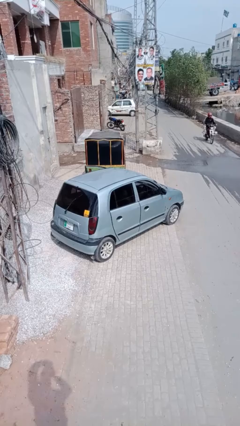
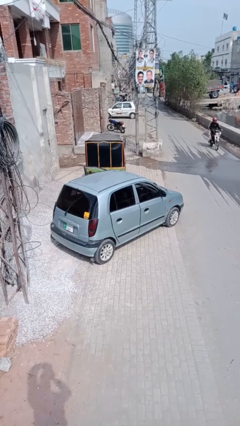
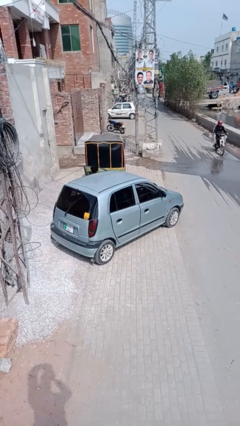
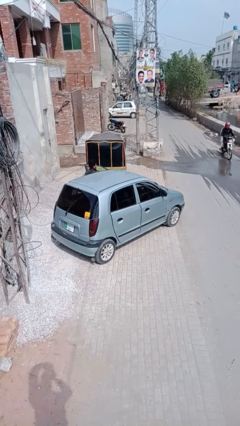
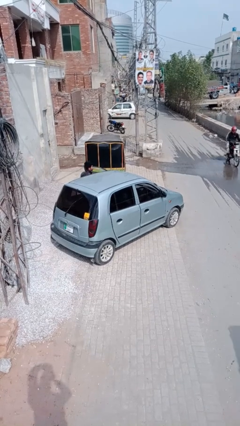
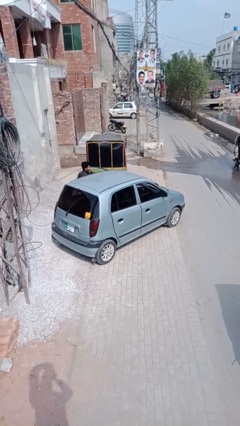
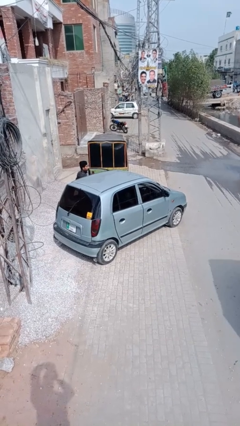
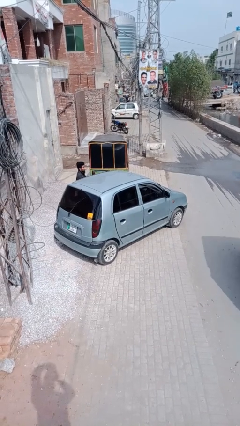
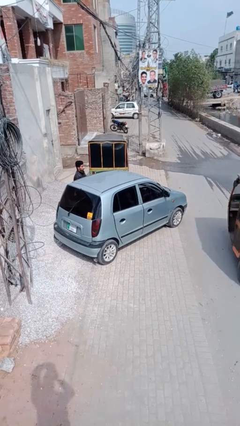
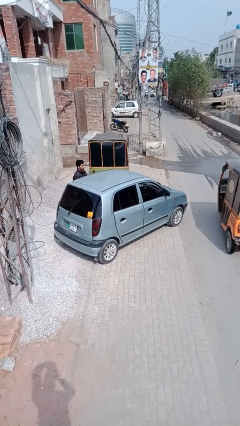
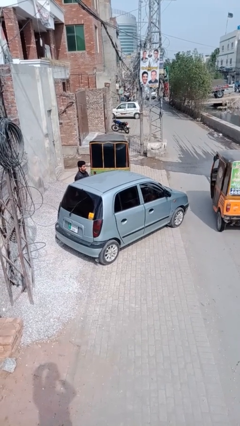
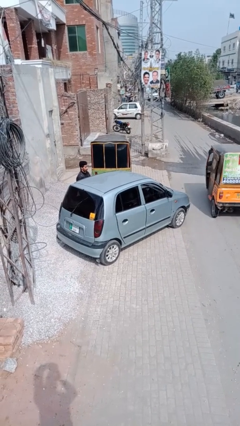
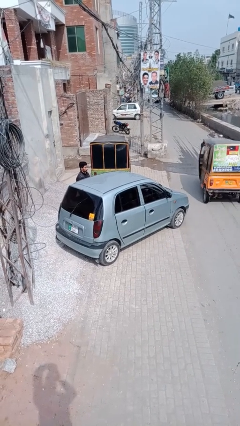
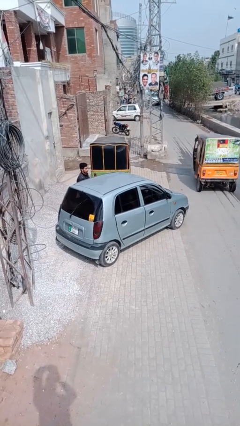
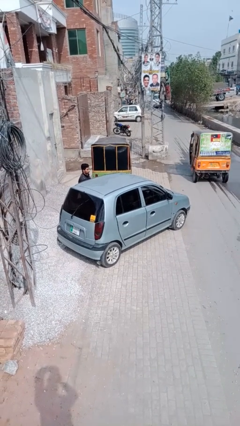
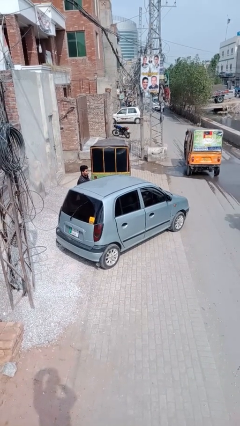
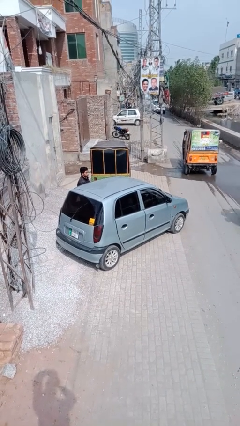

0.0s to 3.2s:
car drops off person

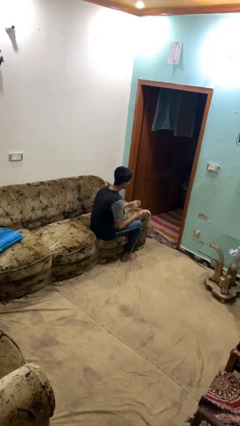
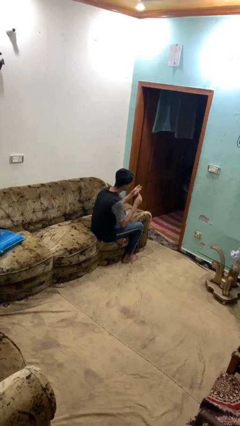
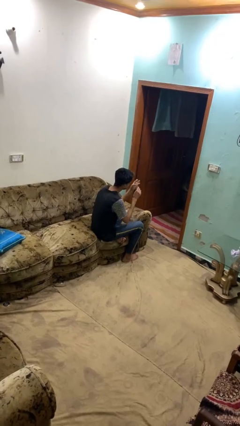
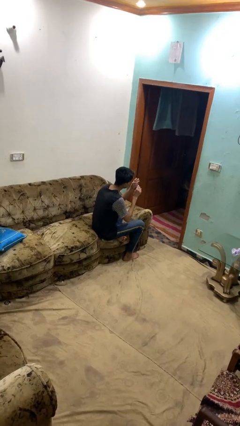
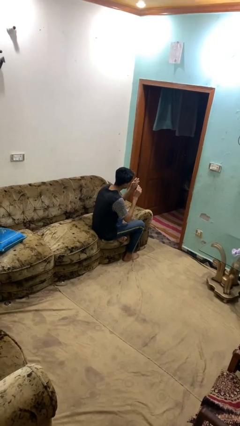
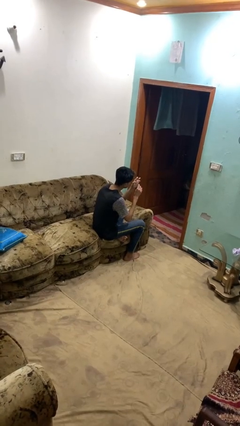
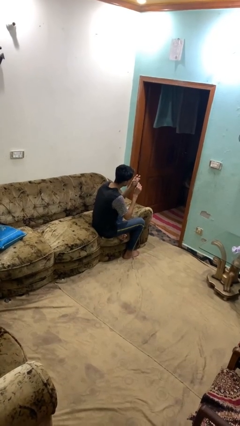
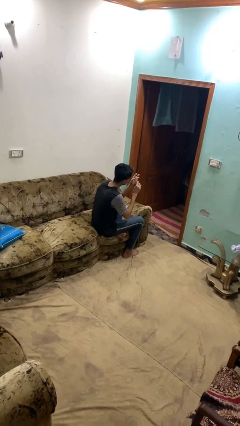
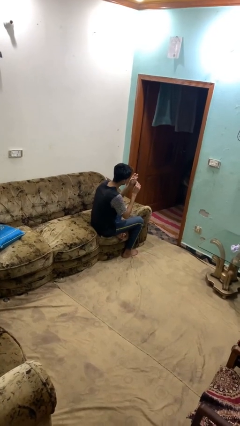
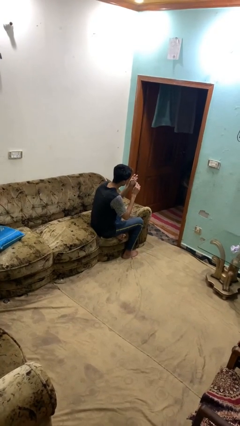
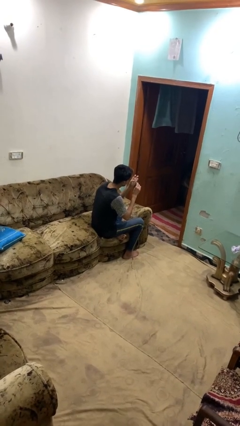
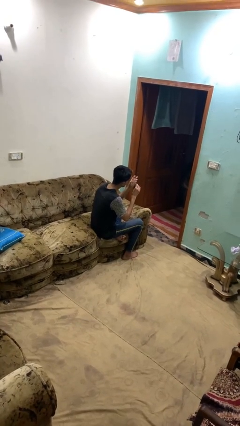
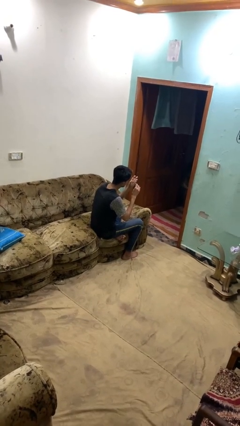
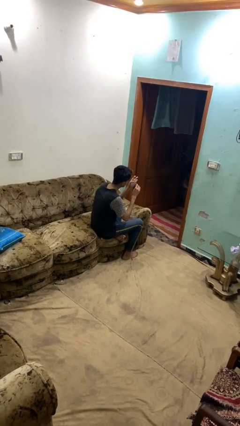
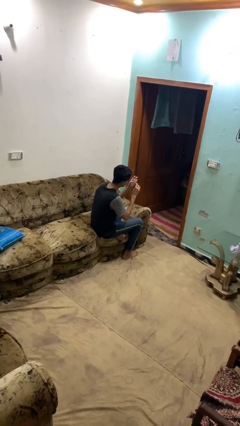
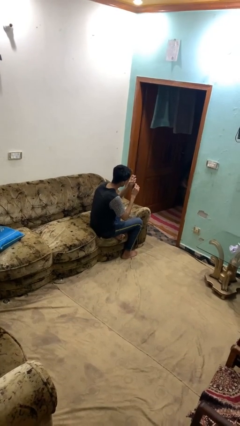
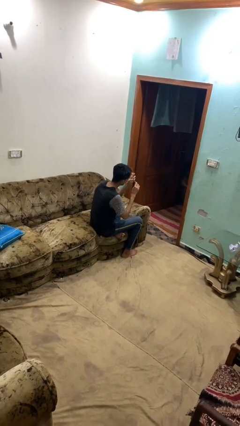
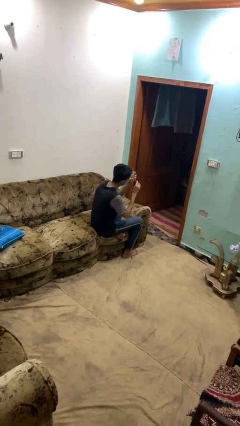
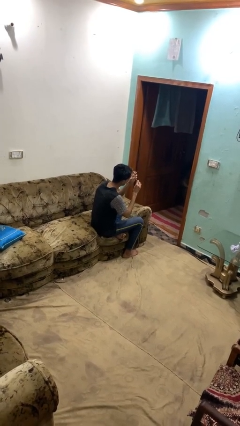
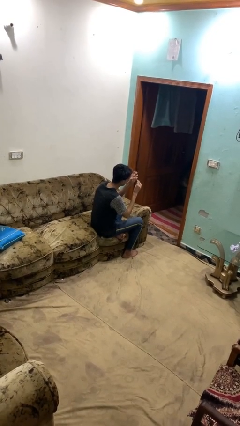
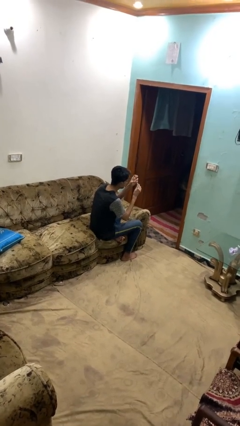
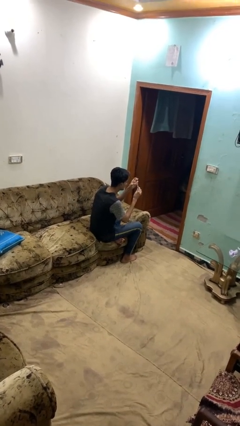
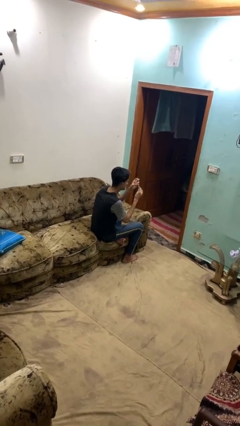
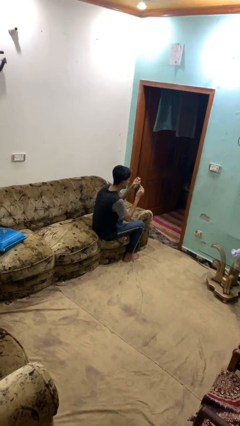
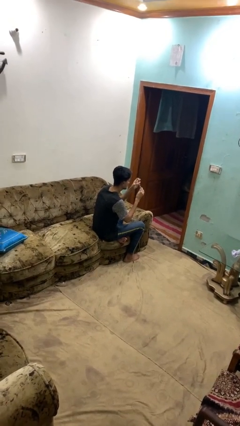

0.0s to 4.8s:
person files fingernails

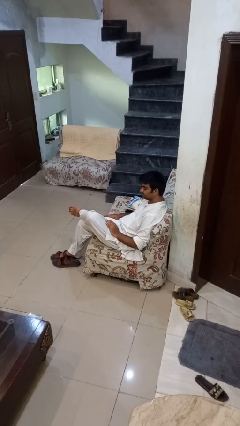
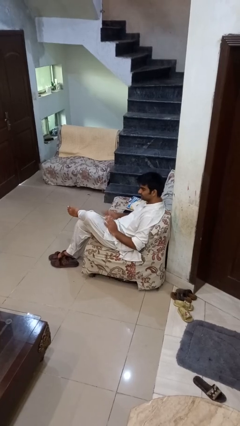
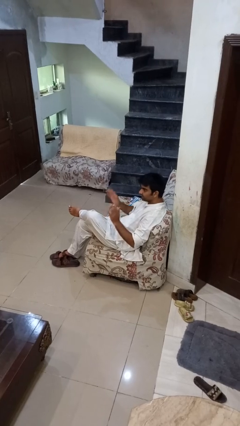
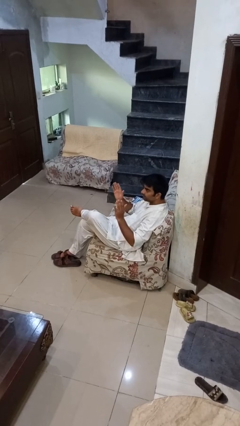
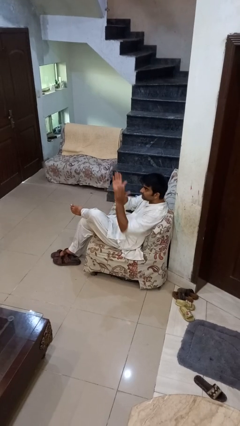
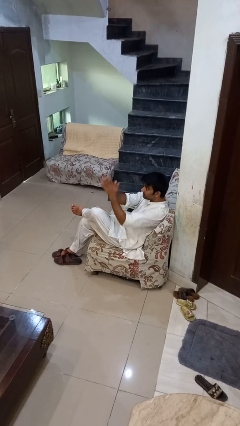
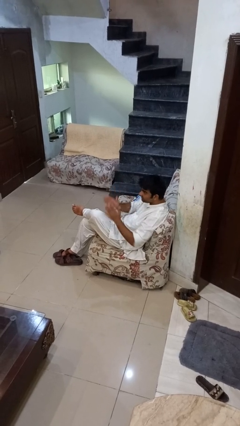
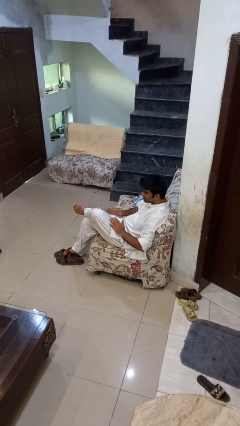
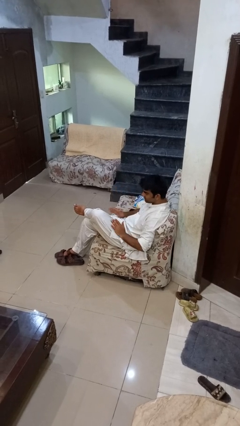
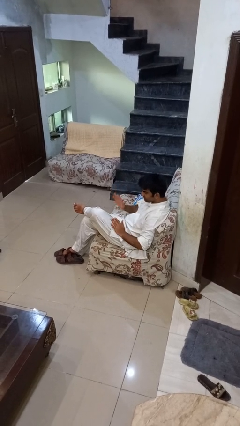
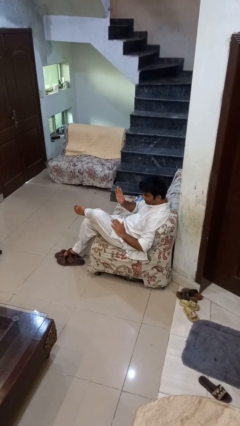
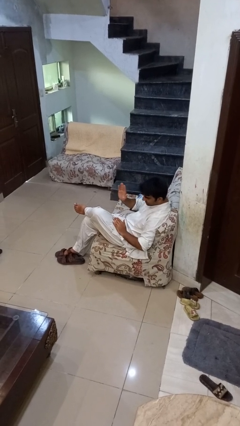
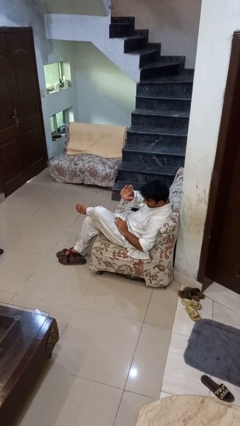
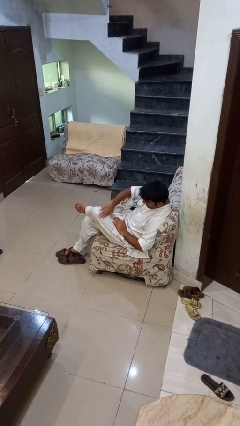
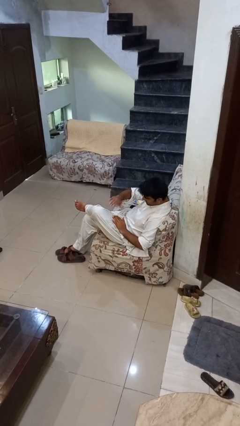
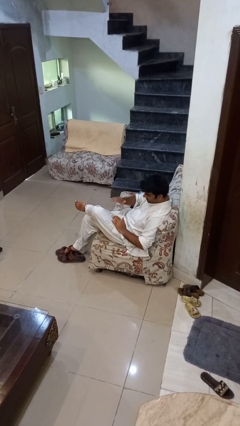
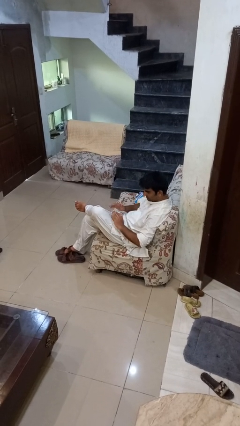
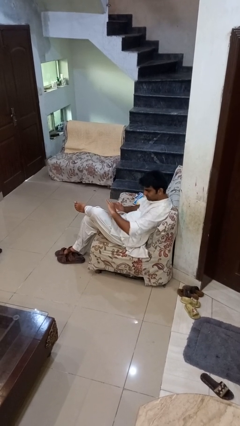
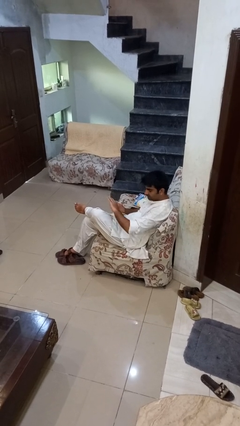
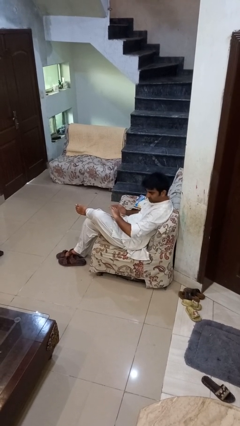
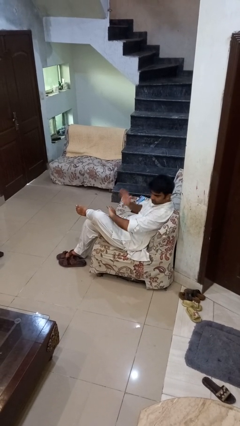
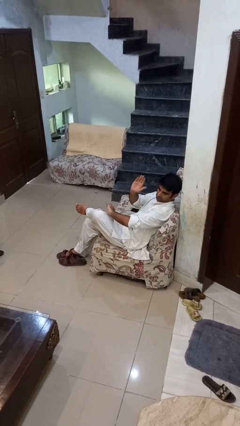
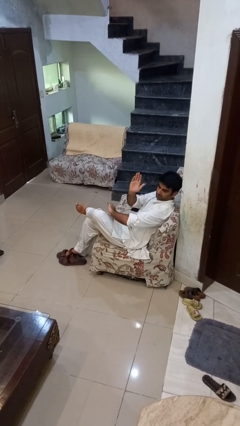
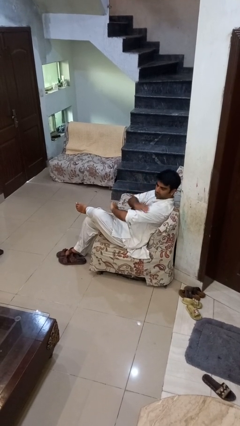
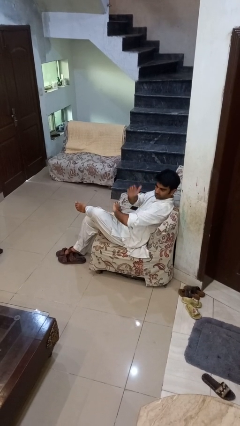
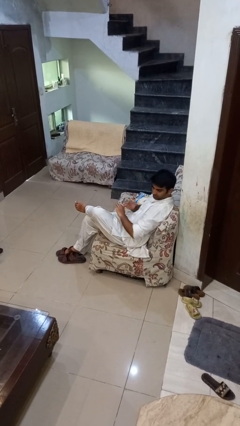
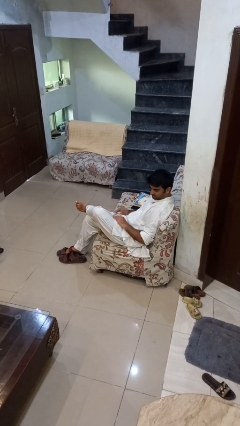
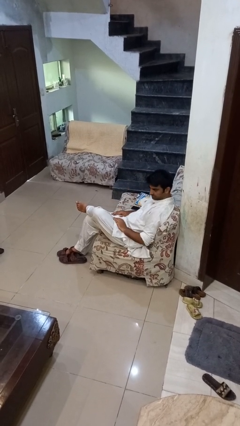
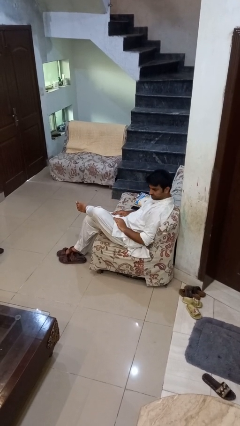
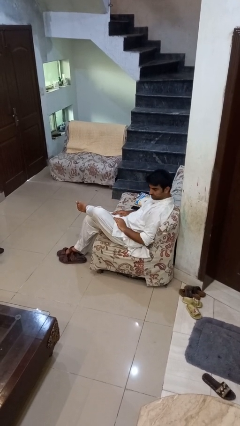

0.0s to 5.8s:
person swats bug

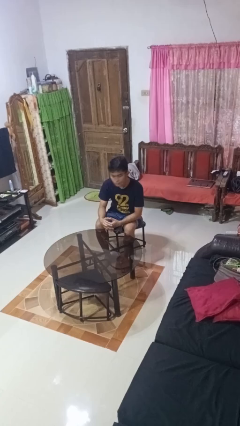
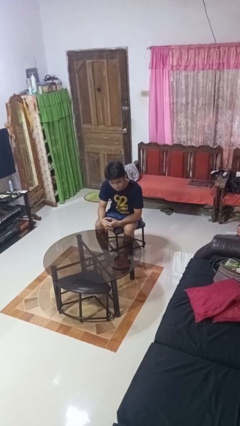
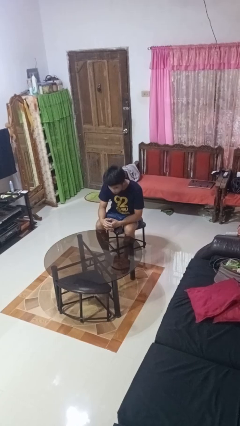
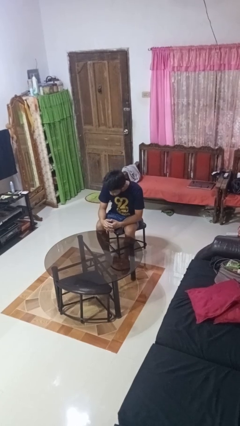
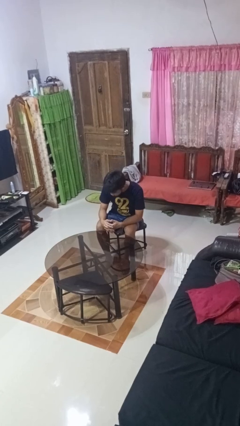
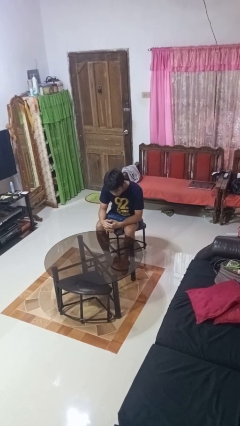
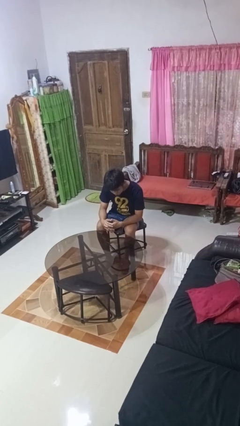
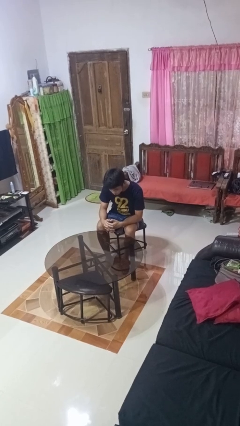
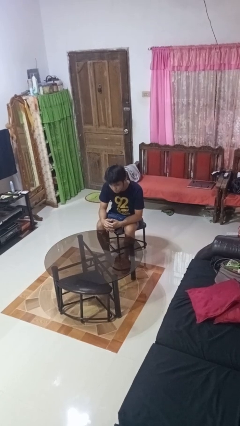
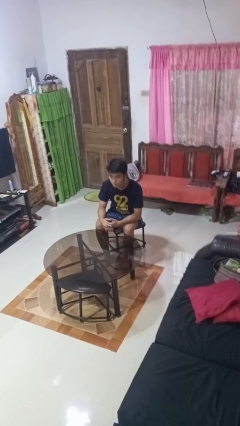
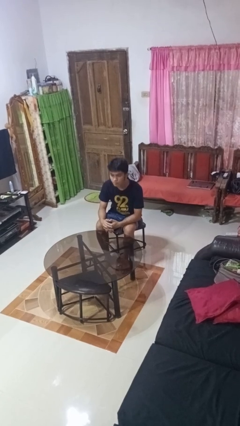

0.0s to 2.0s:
person shakes head

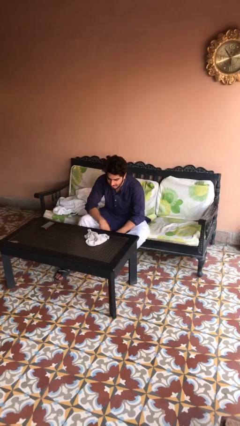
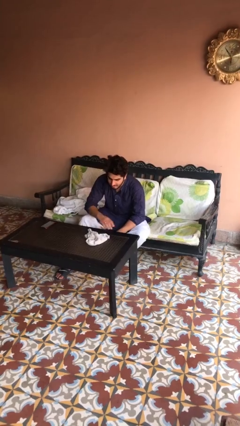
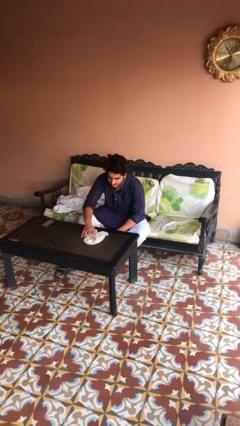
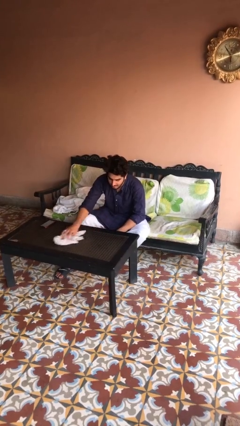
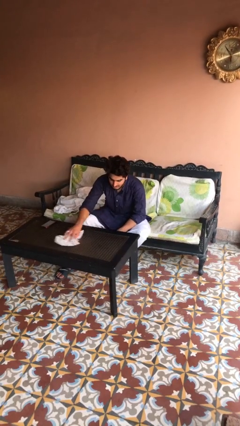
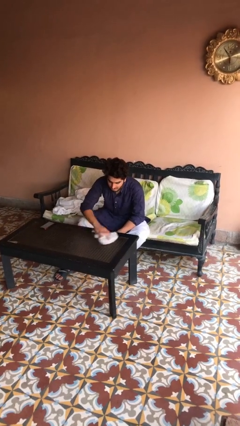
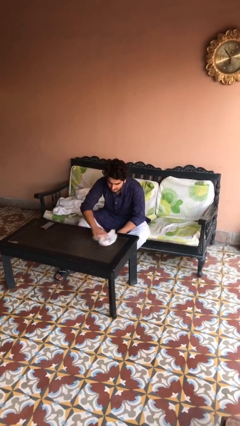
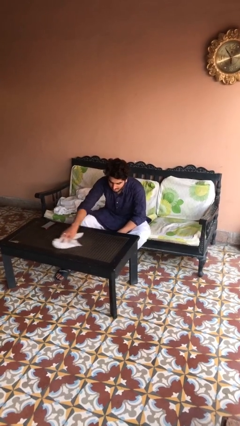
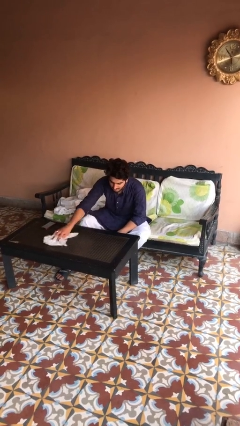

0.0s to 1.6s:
person cleans table with rag
